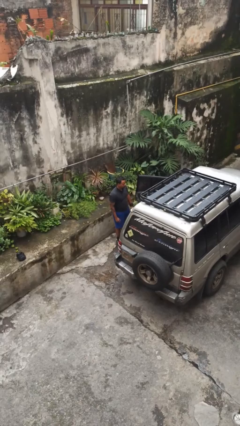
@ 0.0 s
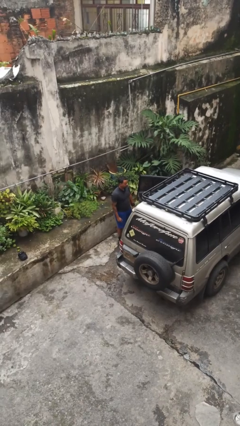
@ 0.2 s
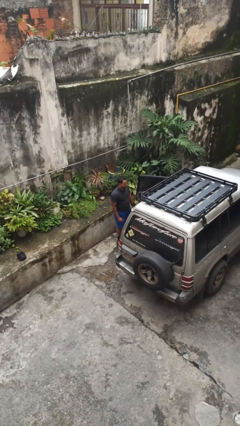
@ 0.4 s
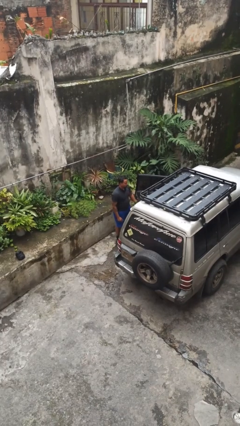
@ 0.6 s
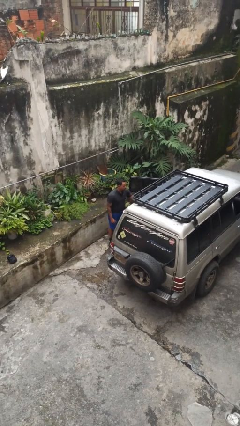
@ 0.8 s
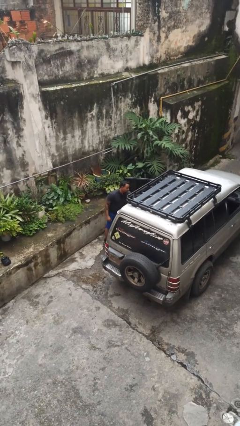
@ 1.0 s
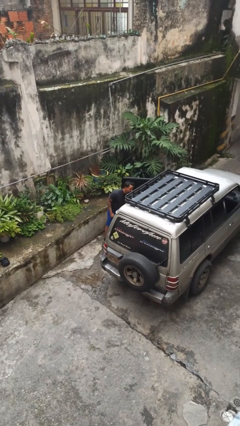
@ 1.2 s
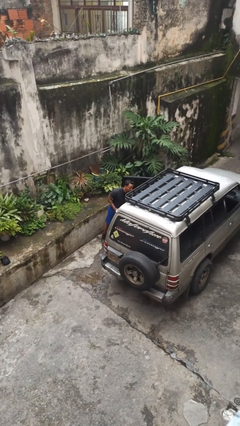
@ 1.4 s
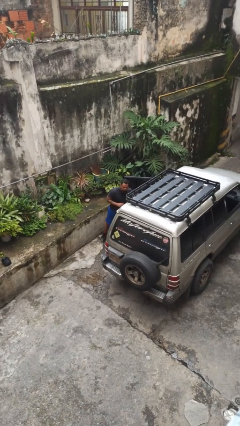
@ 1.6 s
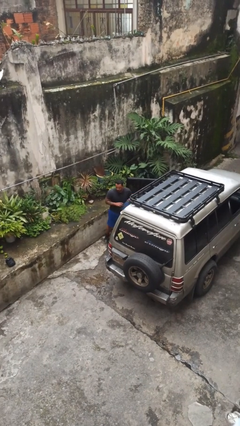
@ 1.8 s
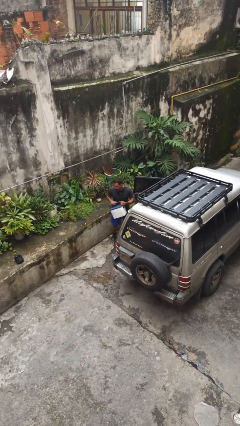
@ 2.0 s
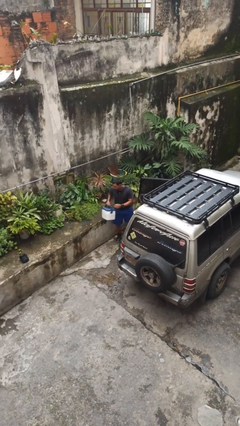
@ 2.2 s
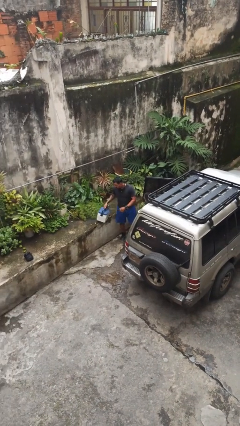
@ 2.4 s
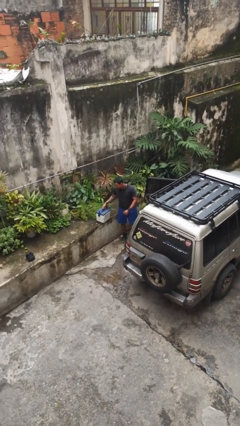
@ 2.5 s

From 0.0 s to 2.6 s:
person unloads car

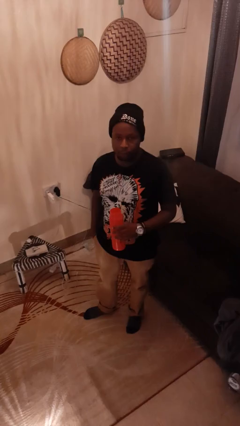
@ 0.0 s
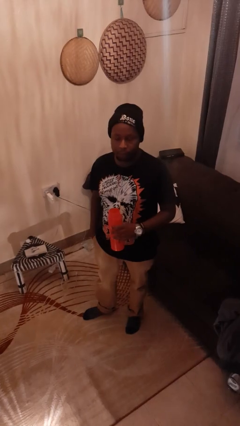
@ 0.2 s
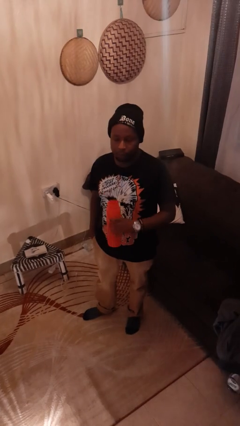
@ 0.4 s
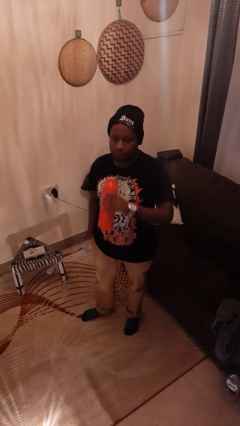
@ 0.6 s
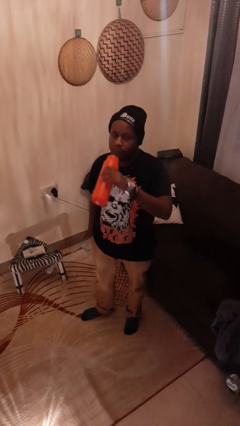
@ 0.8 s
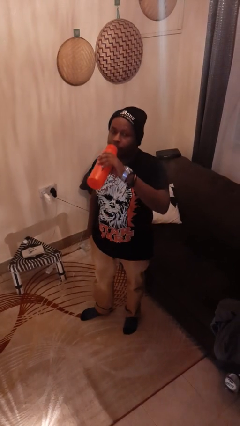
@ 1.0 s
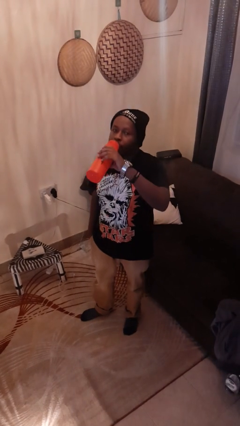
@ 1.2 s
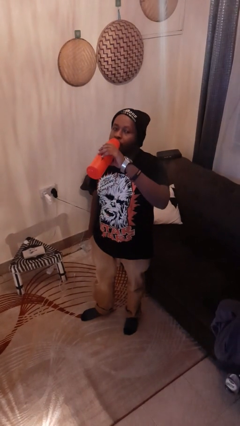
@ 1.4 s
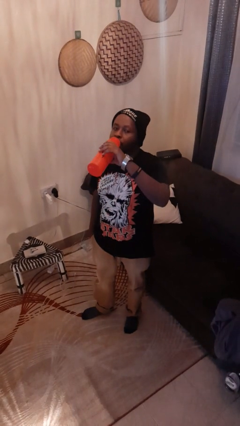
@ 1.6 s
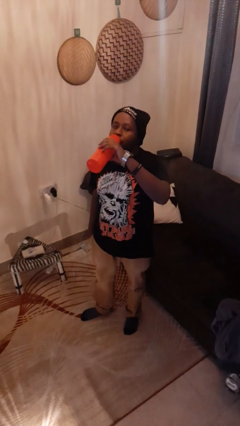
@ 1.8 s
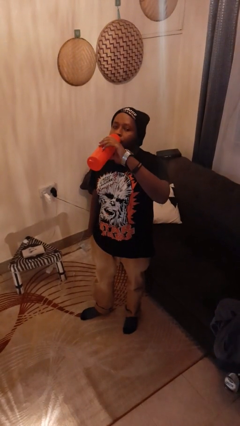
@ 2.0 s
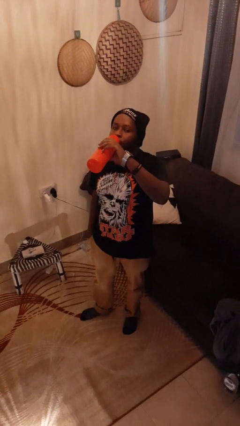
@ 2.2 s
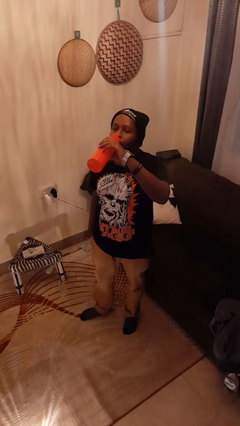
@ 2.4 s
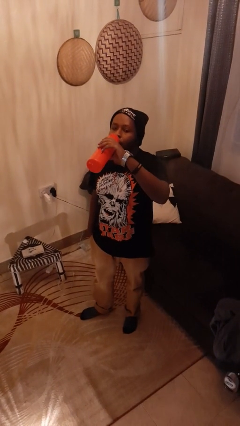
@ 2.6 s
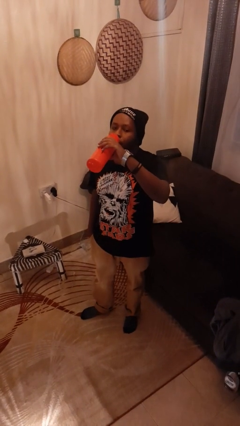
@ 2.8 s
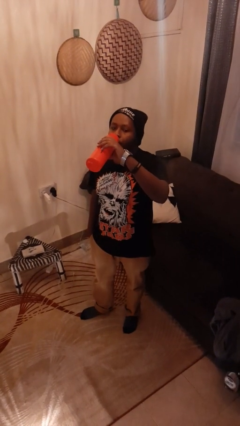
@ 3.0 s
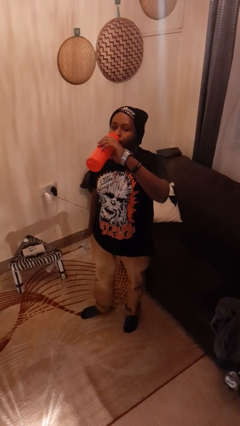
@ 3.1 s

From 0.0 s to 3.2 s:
person drinks from bottle

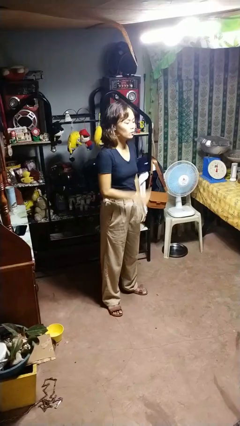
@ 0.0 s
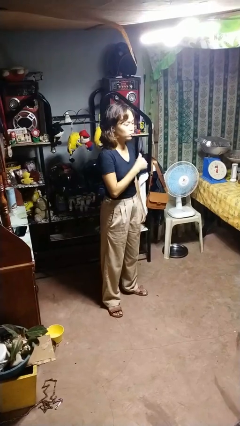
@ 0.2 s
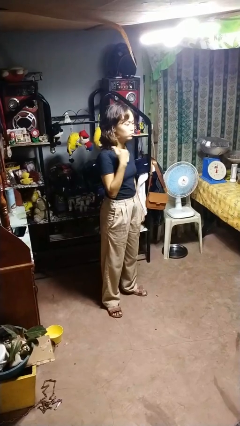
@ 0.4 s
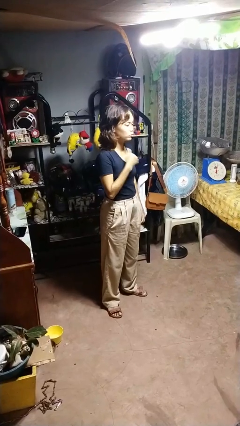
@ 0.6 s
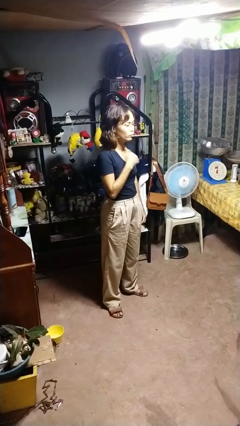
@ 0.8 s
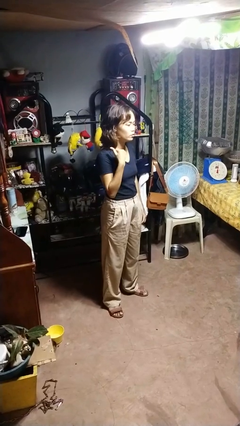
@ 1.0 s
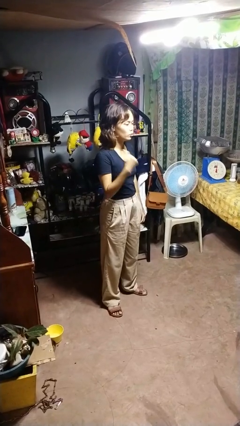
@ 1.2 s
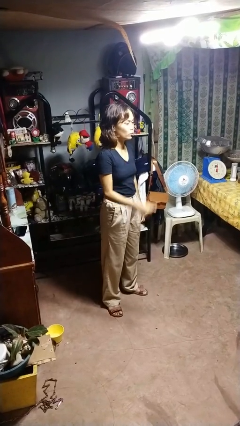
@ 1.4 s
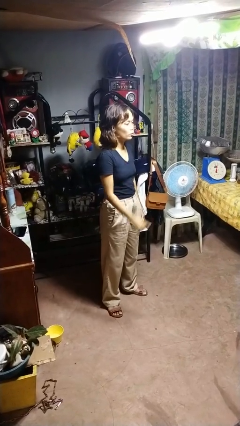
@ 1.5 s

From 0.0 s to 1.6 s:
person gestures cut

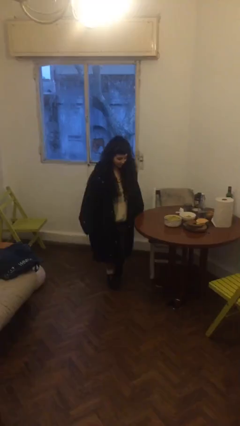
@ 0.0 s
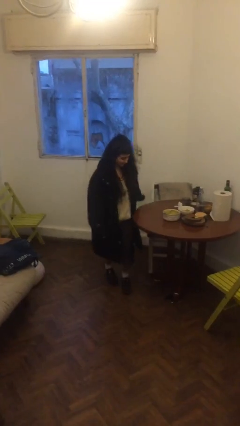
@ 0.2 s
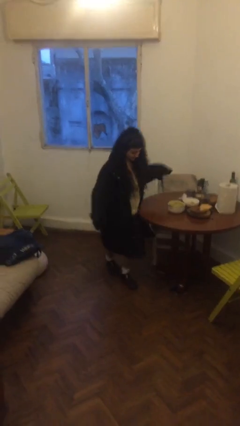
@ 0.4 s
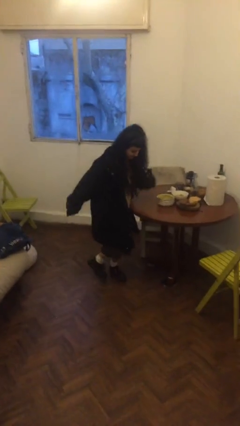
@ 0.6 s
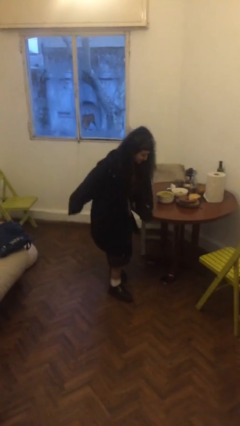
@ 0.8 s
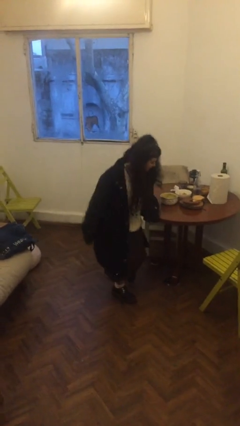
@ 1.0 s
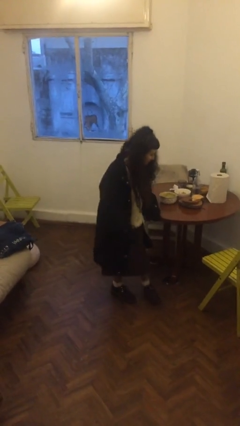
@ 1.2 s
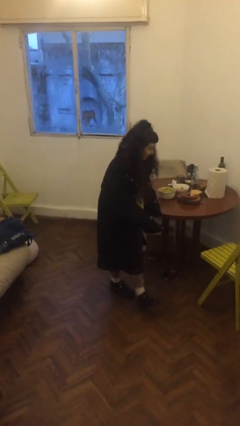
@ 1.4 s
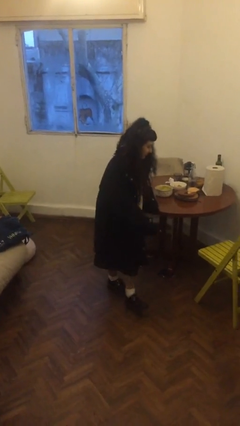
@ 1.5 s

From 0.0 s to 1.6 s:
person bumps into table

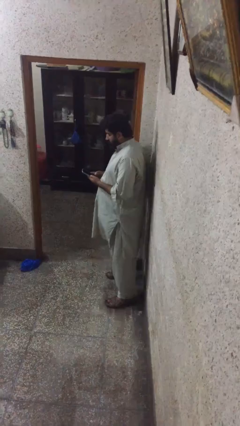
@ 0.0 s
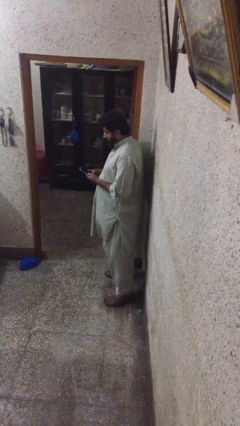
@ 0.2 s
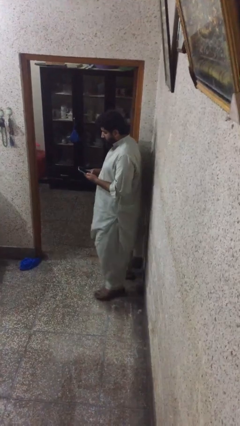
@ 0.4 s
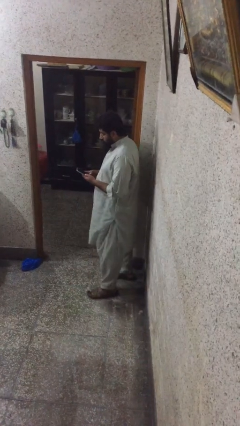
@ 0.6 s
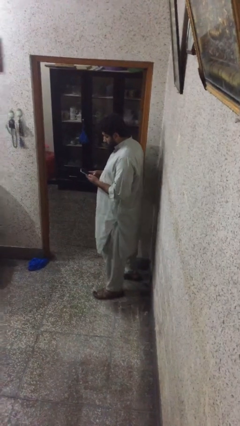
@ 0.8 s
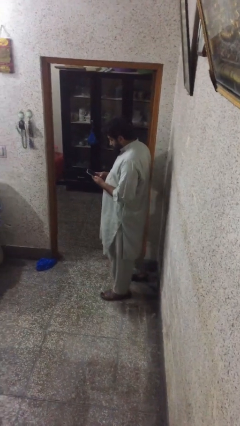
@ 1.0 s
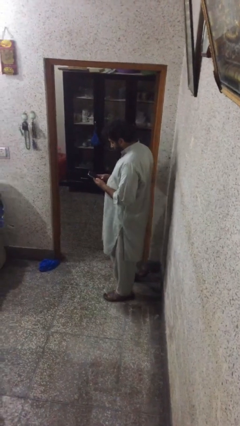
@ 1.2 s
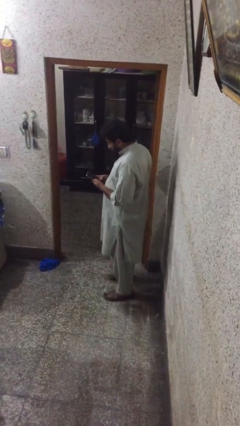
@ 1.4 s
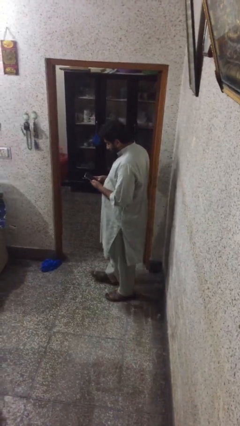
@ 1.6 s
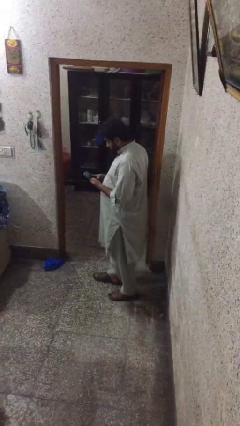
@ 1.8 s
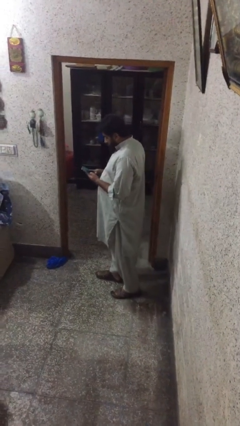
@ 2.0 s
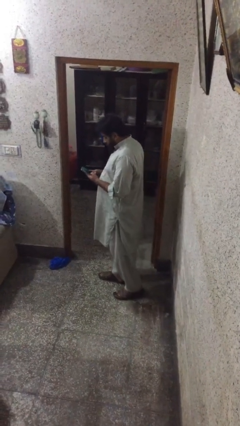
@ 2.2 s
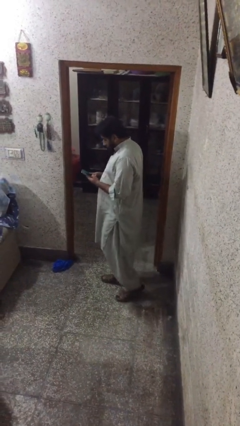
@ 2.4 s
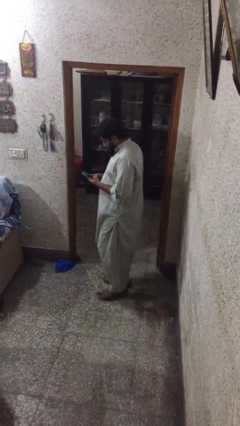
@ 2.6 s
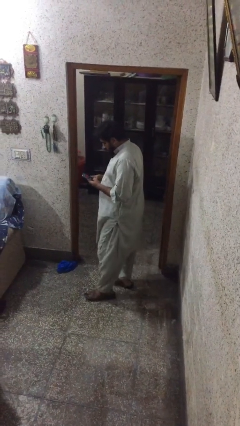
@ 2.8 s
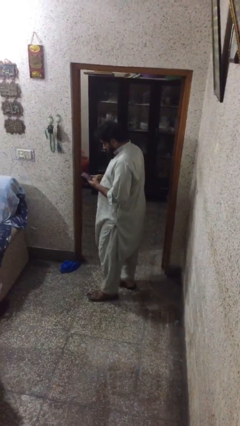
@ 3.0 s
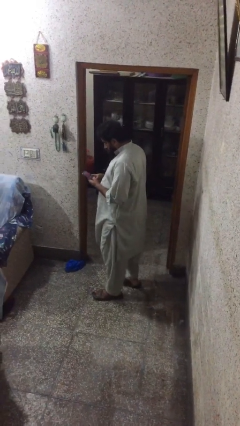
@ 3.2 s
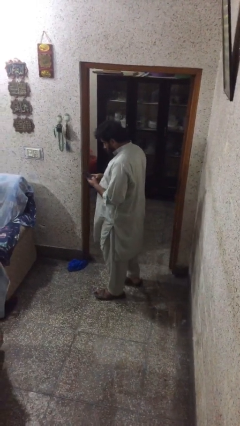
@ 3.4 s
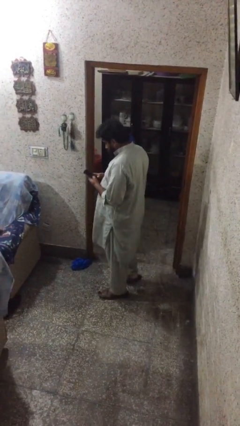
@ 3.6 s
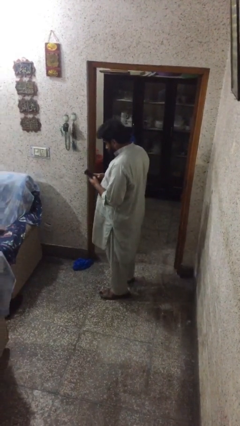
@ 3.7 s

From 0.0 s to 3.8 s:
person texts on phone

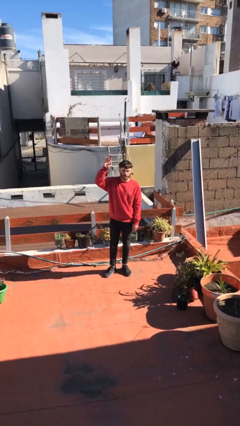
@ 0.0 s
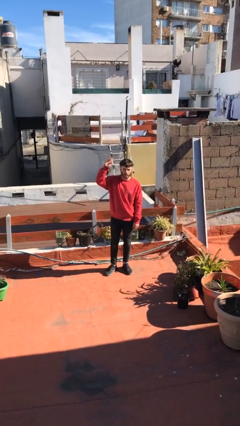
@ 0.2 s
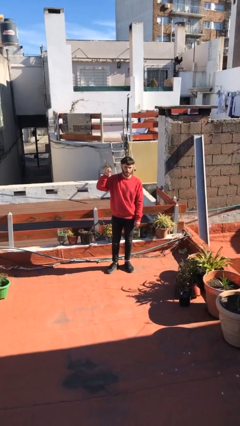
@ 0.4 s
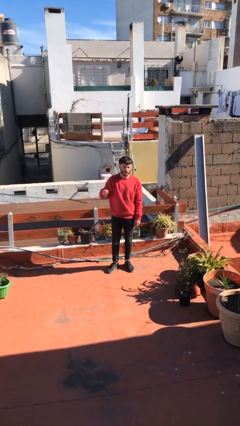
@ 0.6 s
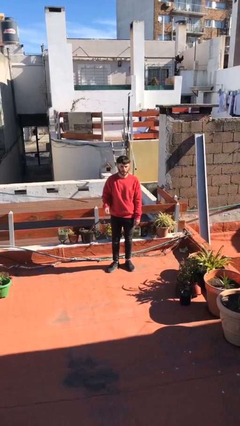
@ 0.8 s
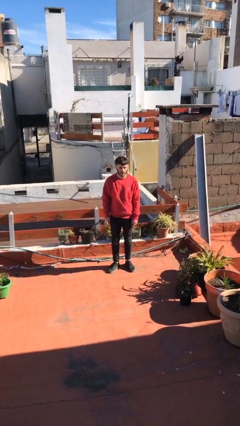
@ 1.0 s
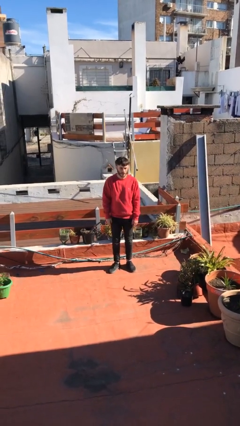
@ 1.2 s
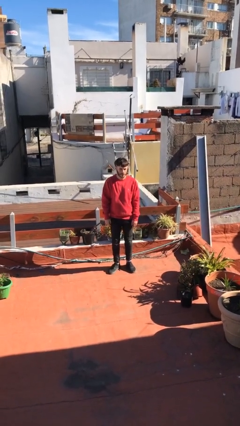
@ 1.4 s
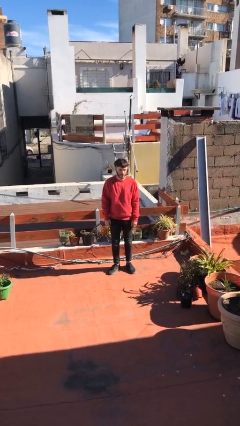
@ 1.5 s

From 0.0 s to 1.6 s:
person gestures lower hand

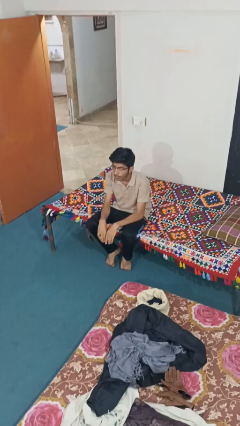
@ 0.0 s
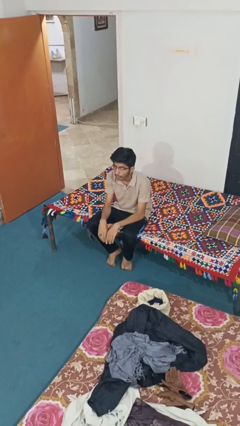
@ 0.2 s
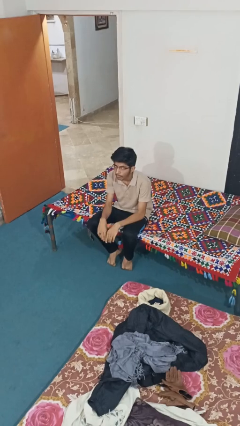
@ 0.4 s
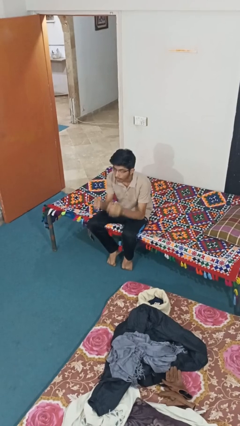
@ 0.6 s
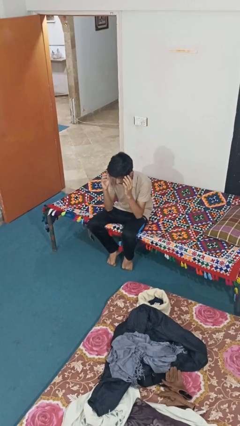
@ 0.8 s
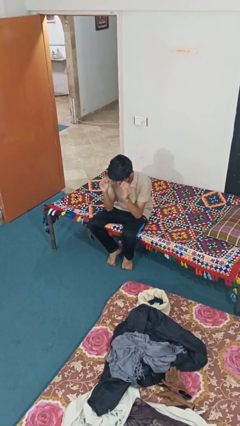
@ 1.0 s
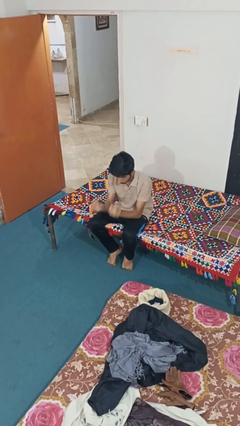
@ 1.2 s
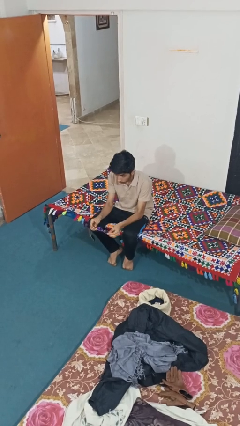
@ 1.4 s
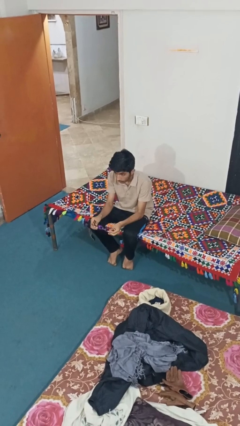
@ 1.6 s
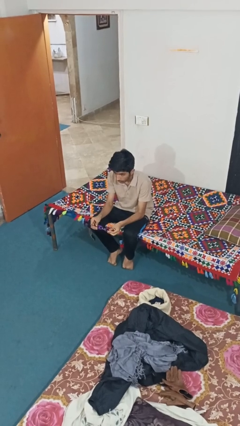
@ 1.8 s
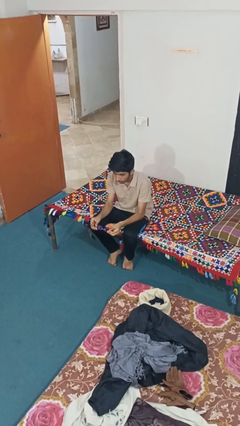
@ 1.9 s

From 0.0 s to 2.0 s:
person takes off glasses

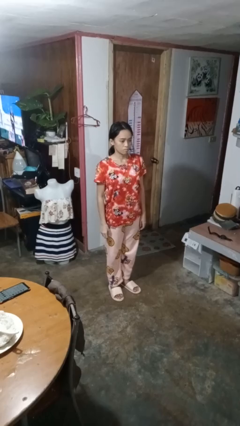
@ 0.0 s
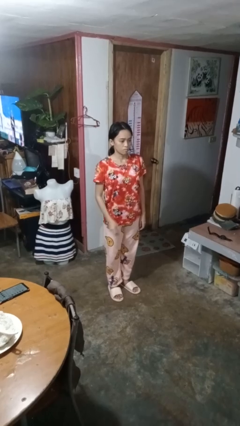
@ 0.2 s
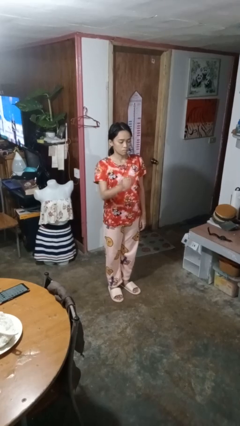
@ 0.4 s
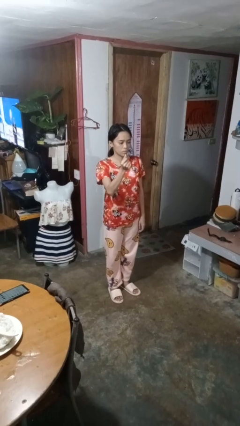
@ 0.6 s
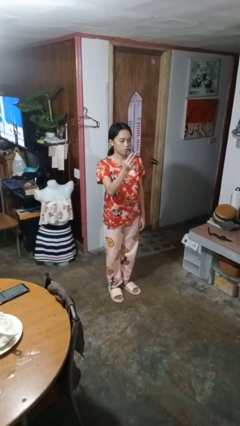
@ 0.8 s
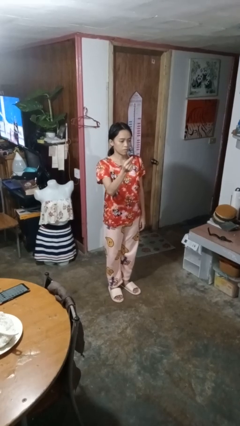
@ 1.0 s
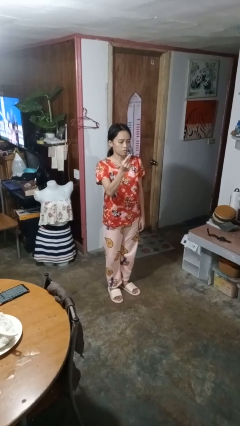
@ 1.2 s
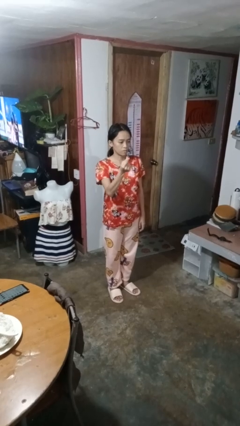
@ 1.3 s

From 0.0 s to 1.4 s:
person snaps fingers
